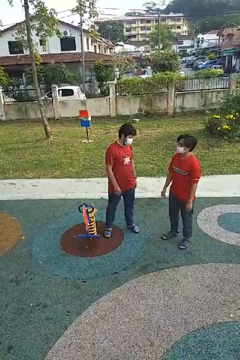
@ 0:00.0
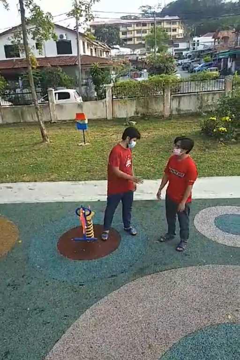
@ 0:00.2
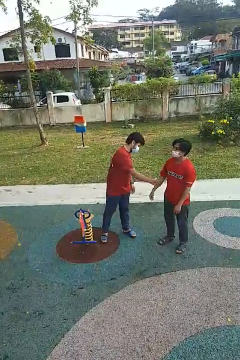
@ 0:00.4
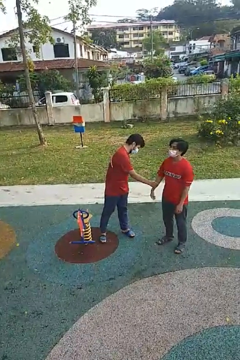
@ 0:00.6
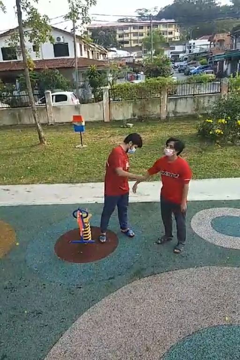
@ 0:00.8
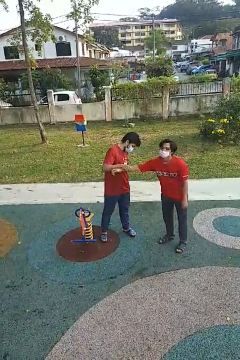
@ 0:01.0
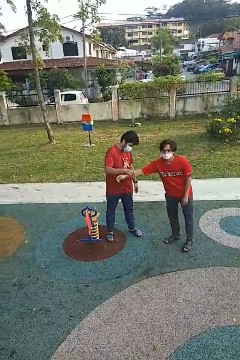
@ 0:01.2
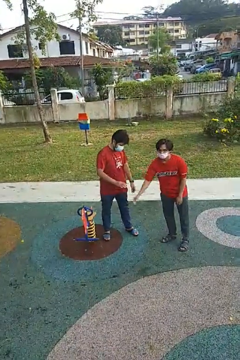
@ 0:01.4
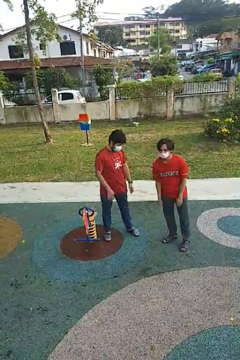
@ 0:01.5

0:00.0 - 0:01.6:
person grabs person by forearm

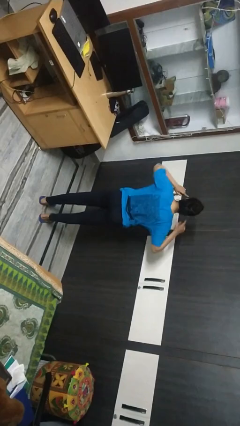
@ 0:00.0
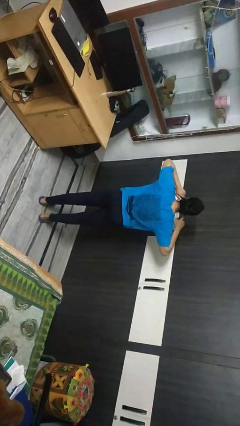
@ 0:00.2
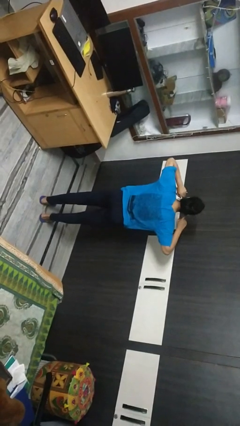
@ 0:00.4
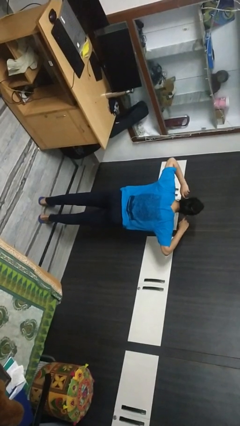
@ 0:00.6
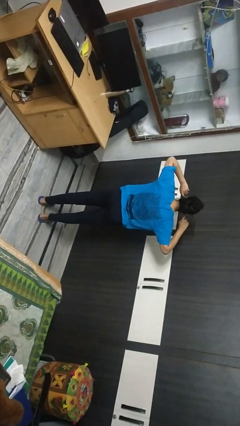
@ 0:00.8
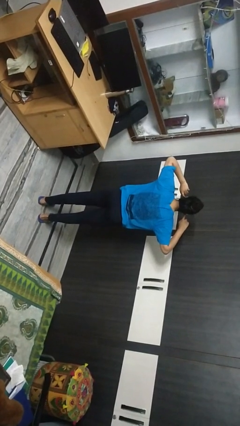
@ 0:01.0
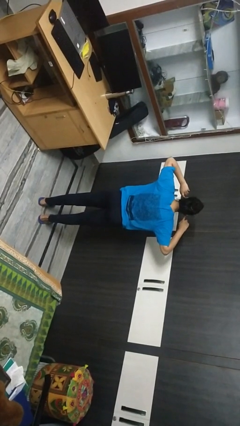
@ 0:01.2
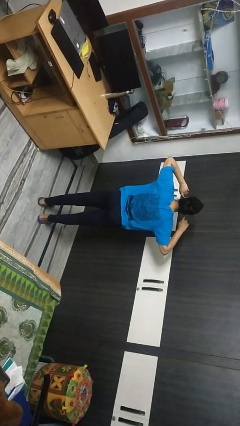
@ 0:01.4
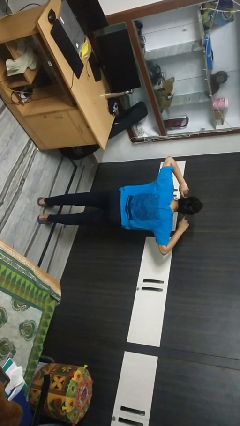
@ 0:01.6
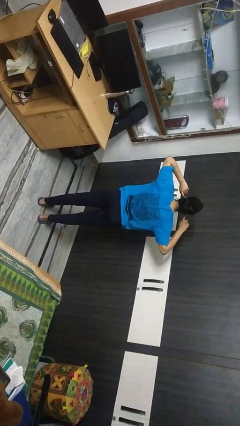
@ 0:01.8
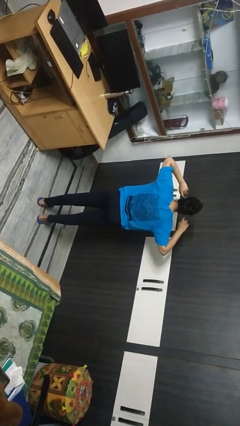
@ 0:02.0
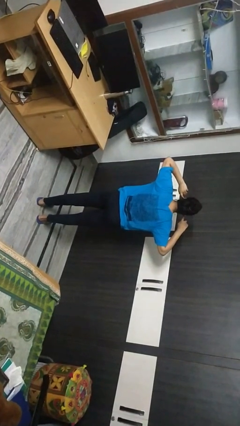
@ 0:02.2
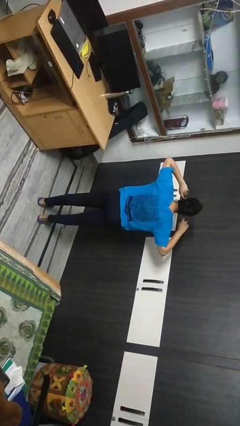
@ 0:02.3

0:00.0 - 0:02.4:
person puts fingers in ear

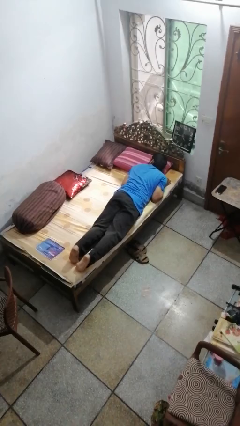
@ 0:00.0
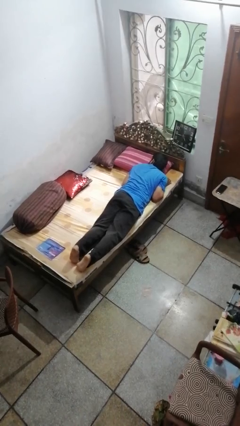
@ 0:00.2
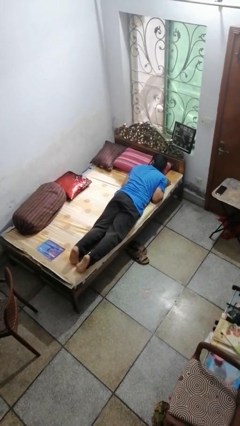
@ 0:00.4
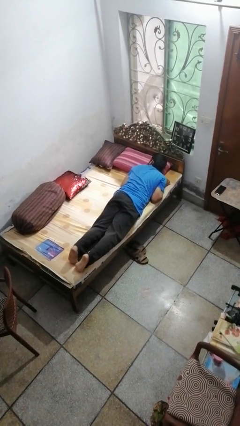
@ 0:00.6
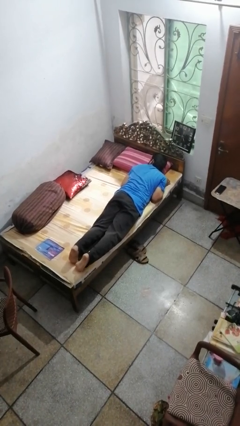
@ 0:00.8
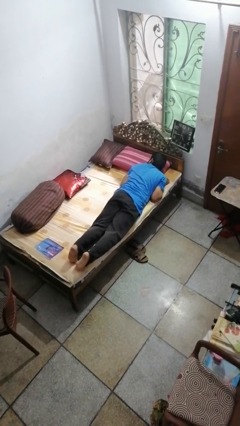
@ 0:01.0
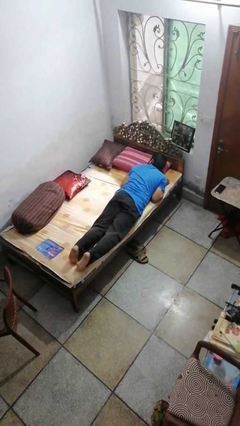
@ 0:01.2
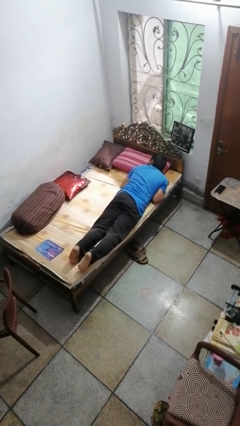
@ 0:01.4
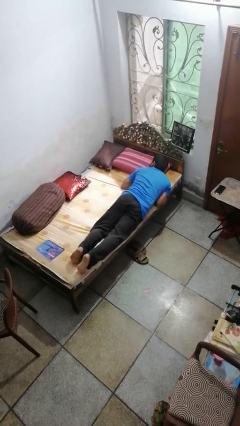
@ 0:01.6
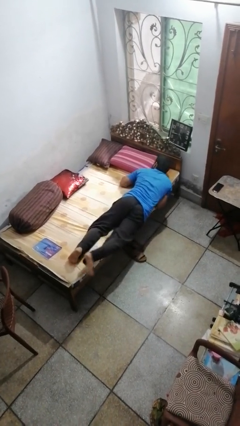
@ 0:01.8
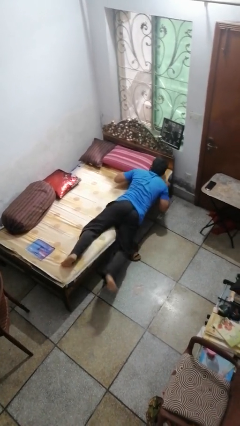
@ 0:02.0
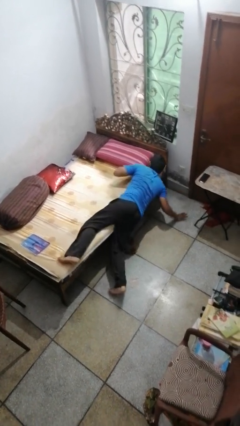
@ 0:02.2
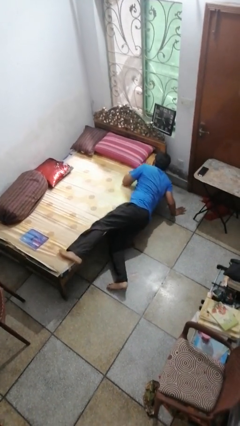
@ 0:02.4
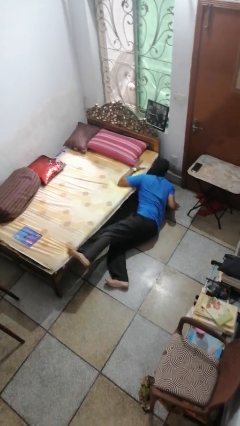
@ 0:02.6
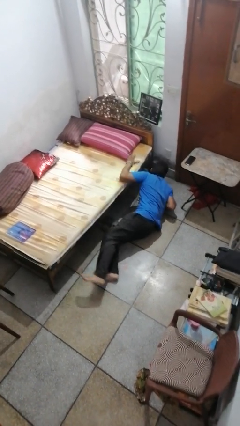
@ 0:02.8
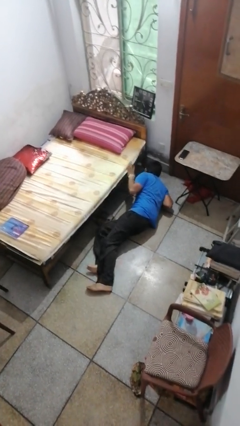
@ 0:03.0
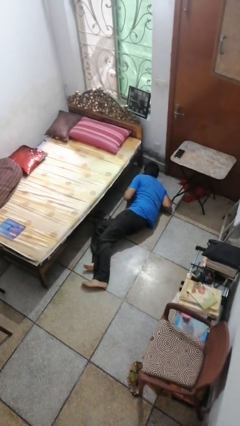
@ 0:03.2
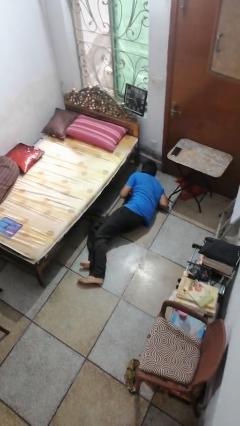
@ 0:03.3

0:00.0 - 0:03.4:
person falls from bed

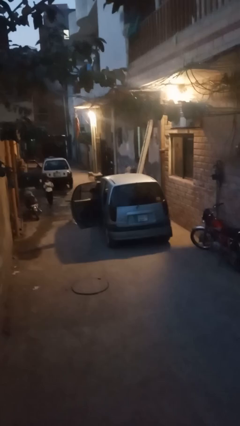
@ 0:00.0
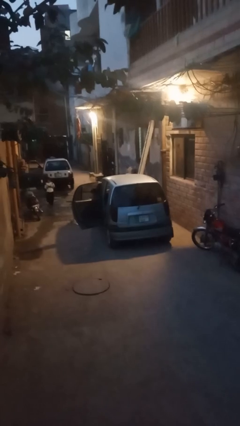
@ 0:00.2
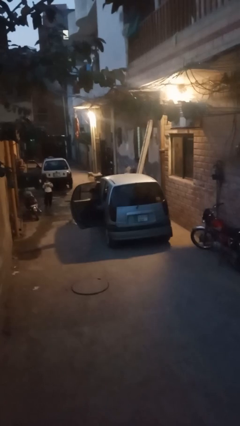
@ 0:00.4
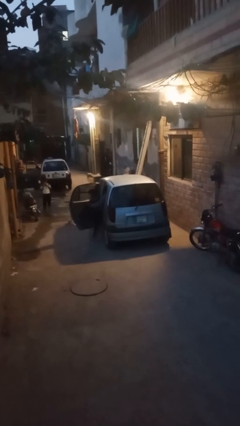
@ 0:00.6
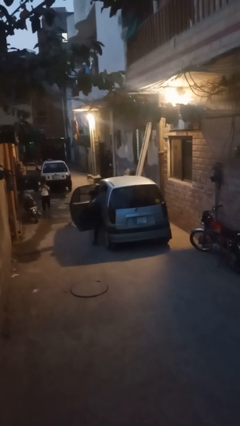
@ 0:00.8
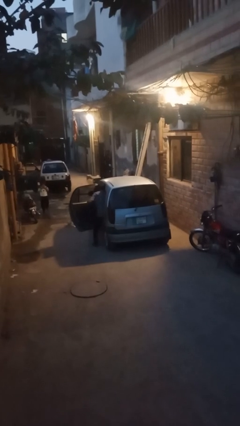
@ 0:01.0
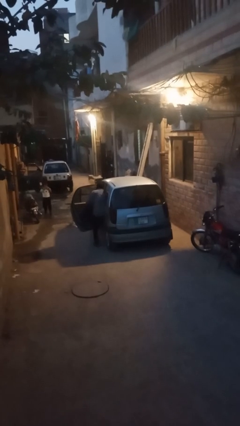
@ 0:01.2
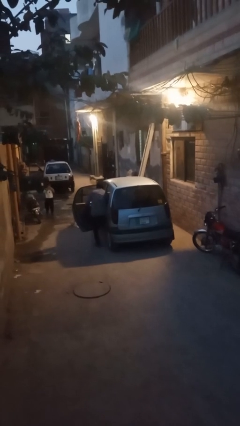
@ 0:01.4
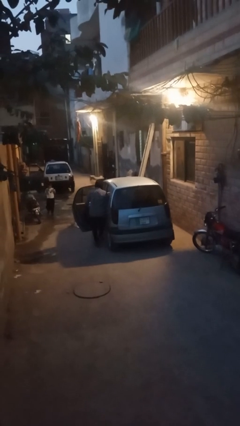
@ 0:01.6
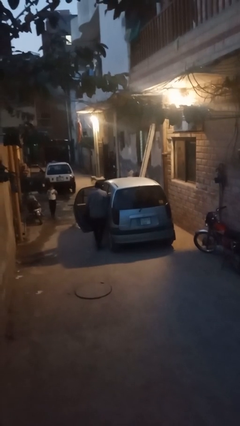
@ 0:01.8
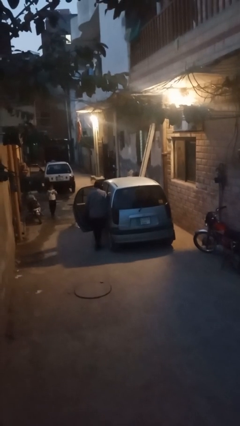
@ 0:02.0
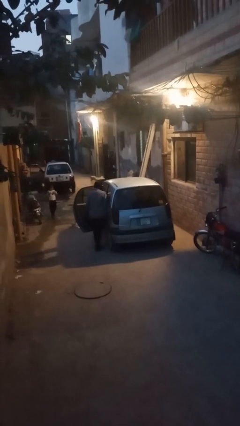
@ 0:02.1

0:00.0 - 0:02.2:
person exits car

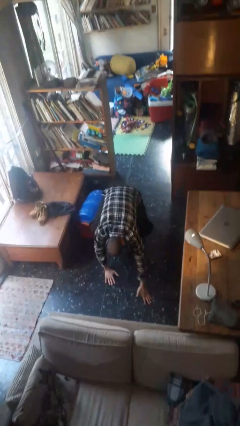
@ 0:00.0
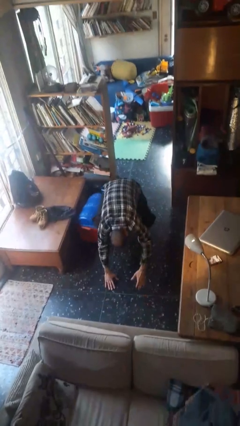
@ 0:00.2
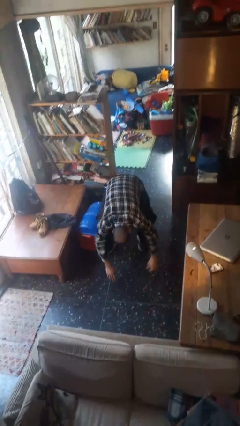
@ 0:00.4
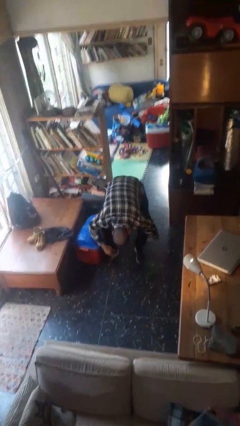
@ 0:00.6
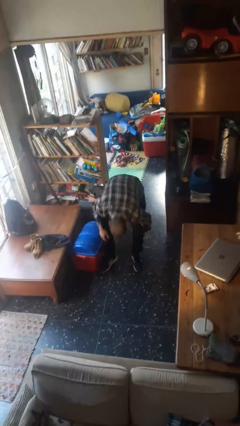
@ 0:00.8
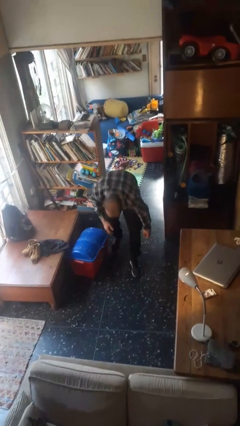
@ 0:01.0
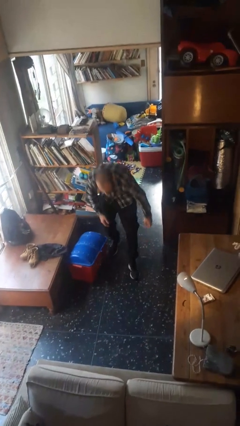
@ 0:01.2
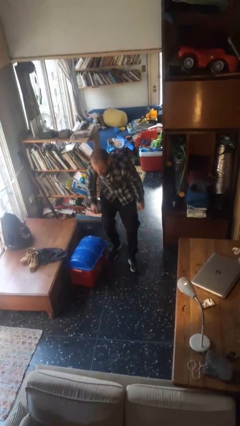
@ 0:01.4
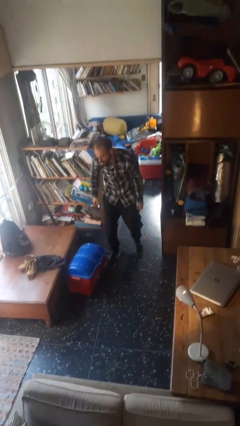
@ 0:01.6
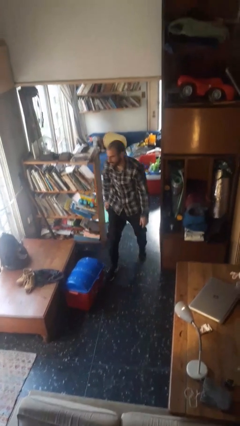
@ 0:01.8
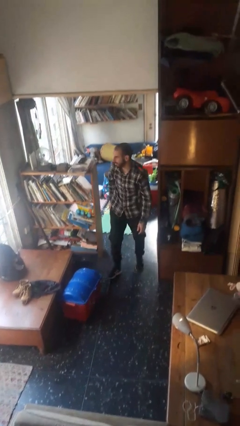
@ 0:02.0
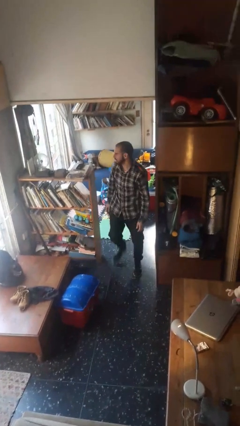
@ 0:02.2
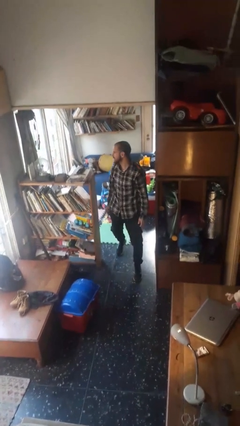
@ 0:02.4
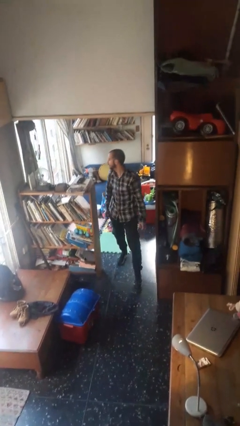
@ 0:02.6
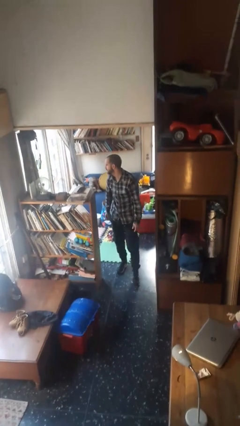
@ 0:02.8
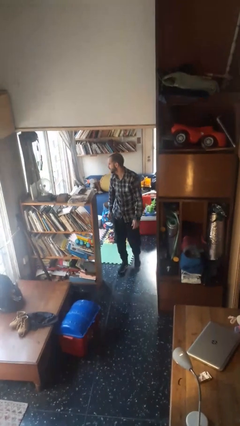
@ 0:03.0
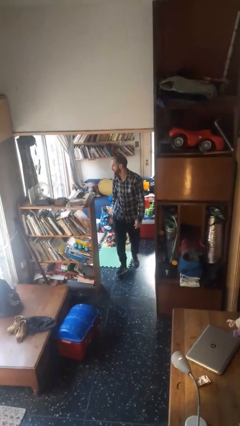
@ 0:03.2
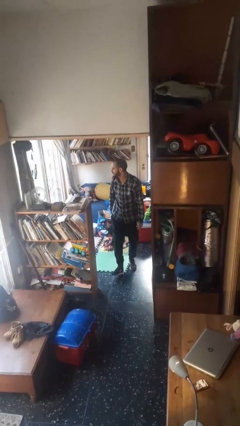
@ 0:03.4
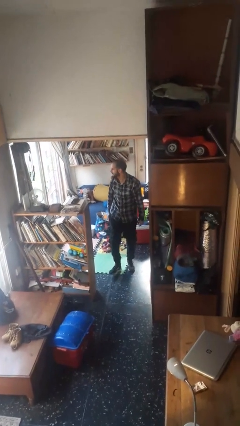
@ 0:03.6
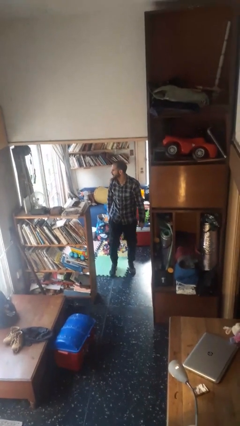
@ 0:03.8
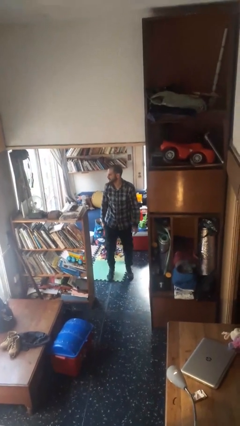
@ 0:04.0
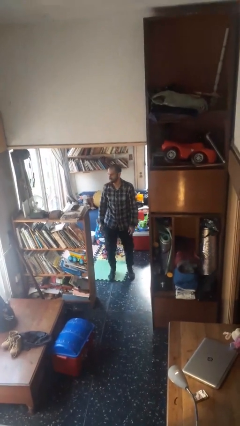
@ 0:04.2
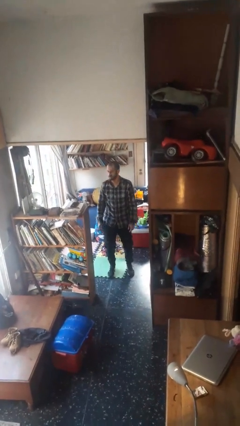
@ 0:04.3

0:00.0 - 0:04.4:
person stands up from floor

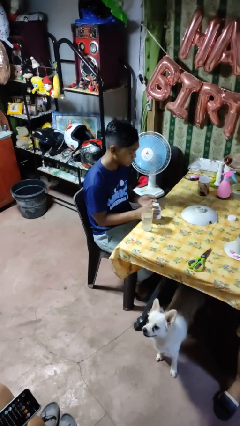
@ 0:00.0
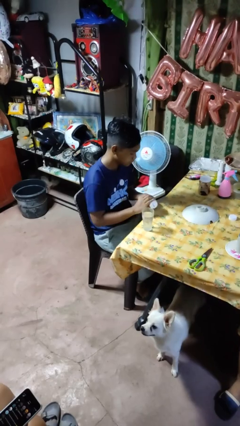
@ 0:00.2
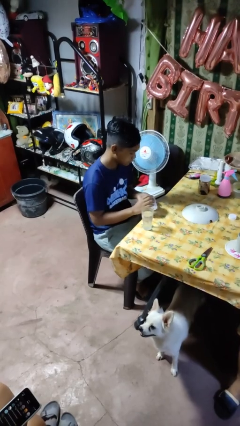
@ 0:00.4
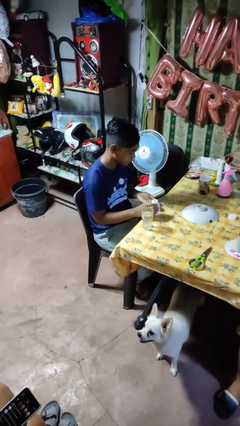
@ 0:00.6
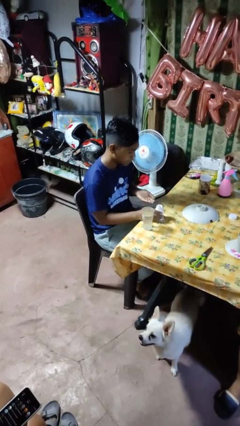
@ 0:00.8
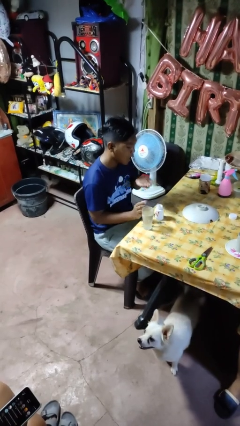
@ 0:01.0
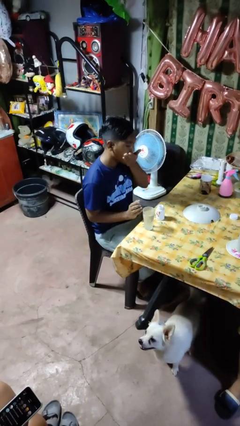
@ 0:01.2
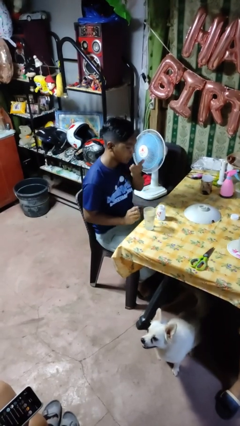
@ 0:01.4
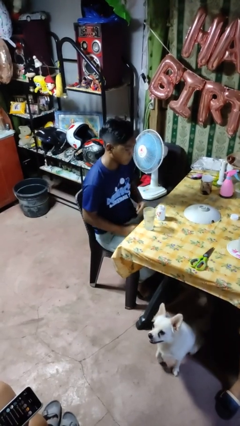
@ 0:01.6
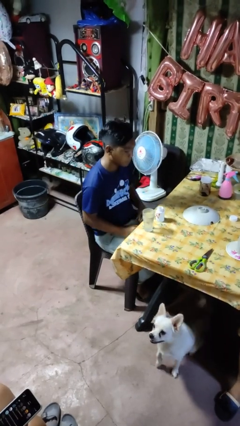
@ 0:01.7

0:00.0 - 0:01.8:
person takes medicine pills

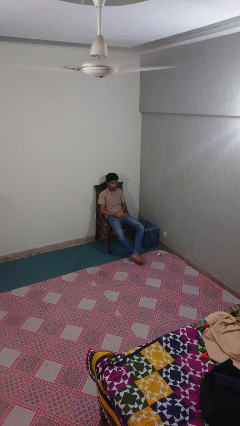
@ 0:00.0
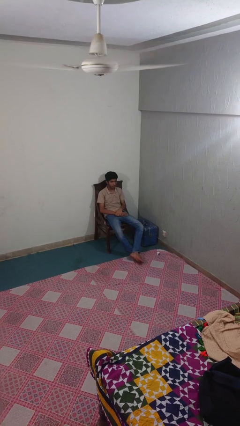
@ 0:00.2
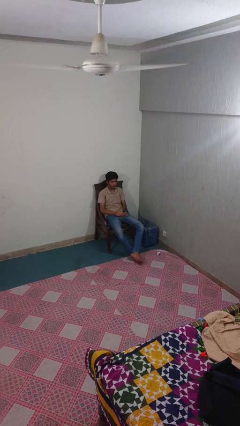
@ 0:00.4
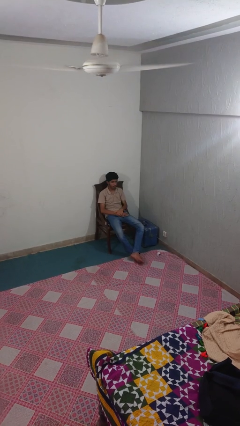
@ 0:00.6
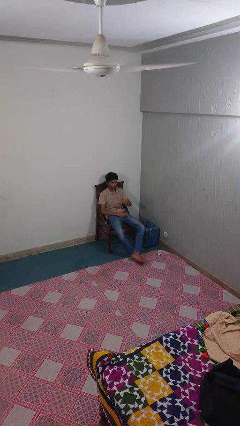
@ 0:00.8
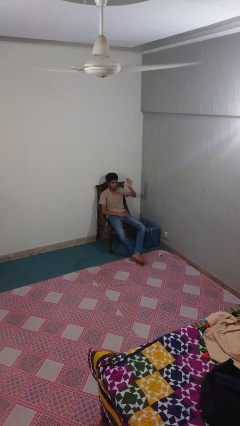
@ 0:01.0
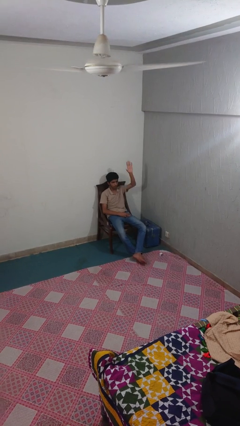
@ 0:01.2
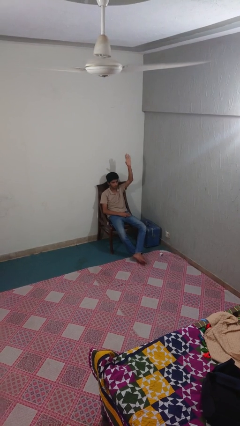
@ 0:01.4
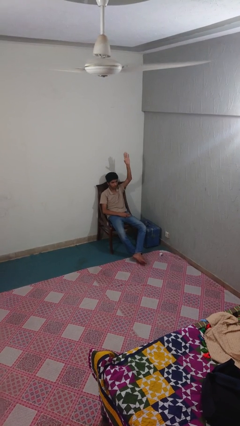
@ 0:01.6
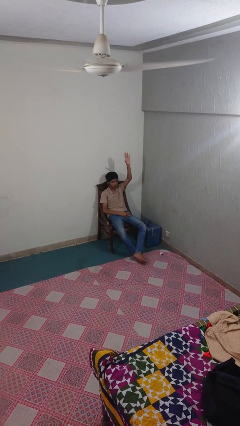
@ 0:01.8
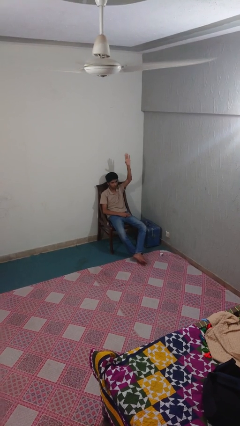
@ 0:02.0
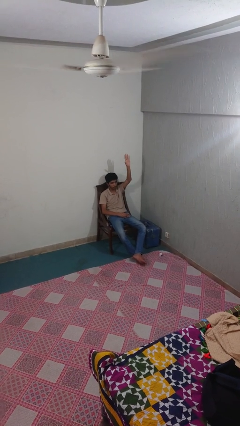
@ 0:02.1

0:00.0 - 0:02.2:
person gestures raise hand
